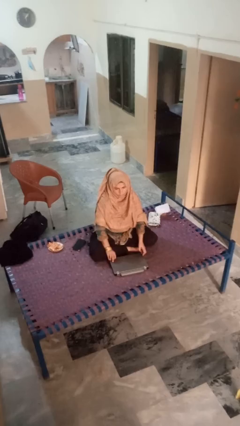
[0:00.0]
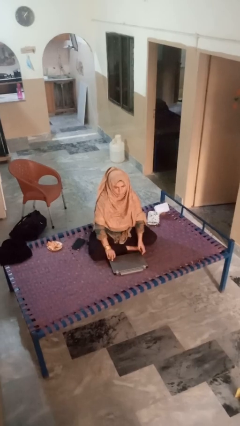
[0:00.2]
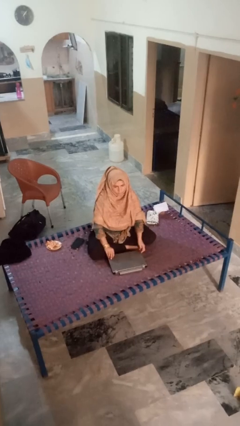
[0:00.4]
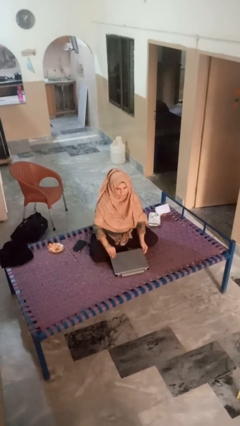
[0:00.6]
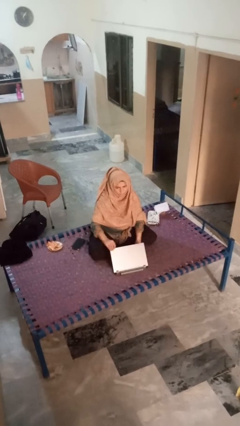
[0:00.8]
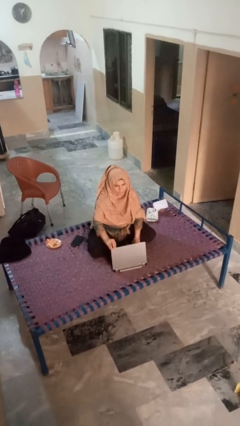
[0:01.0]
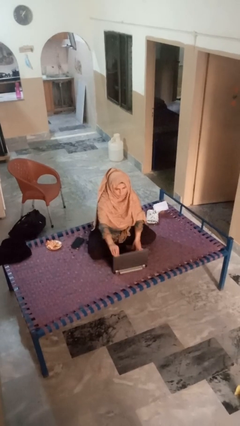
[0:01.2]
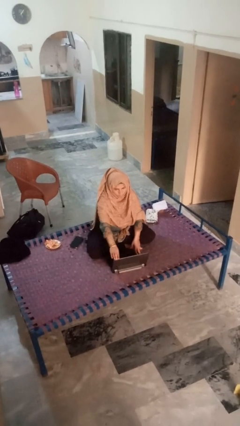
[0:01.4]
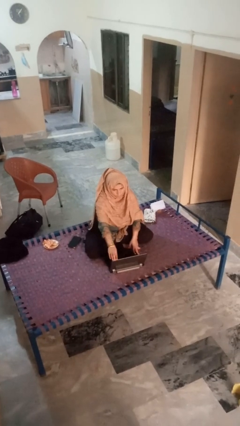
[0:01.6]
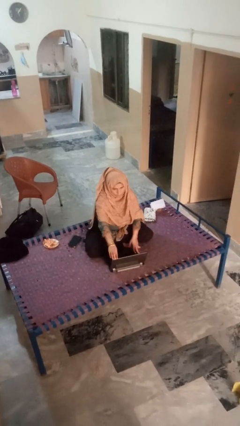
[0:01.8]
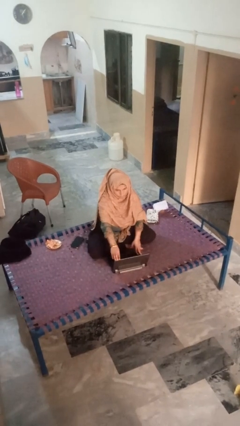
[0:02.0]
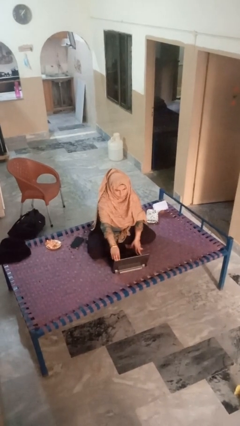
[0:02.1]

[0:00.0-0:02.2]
person opens laptop

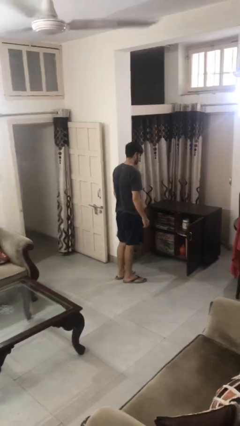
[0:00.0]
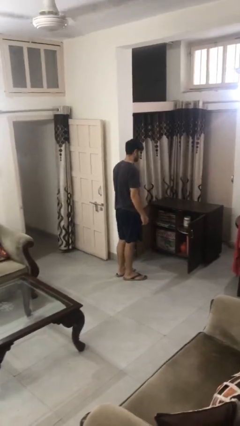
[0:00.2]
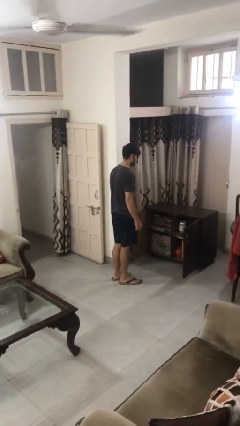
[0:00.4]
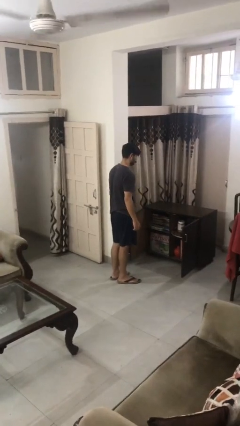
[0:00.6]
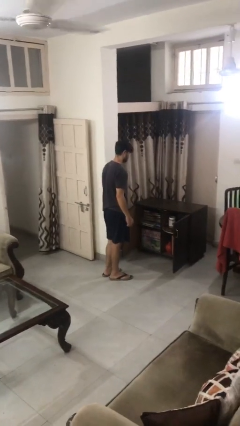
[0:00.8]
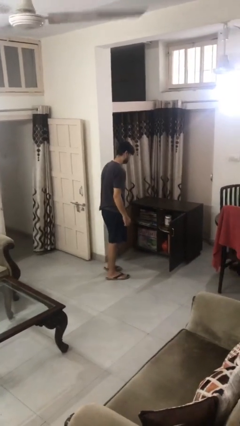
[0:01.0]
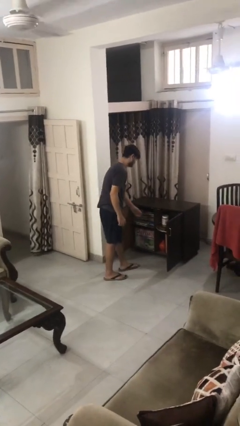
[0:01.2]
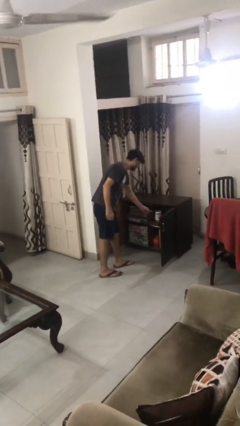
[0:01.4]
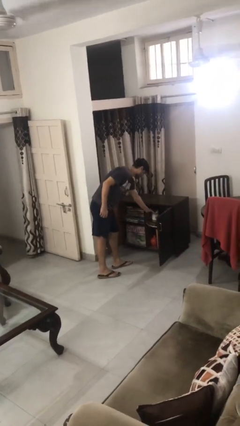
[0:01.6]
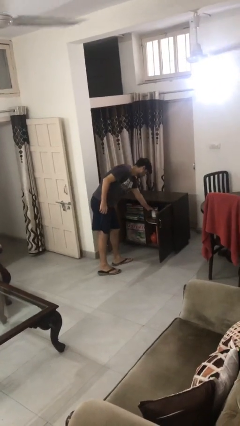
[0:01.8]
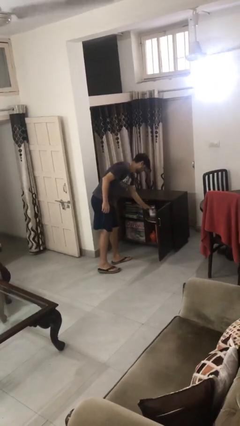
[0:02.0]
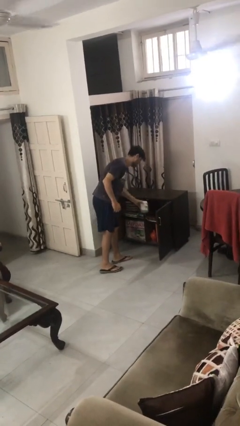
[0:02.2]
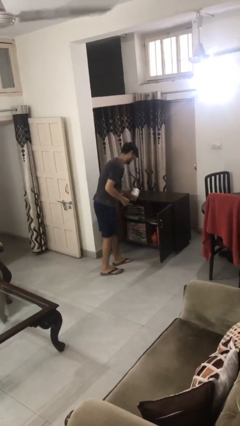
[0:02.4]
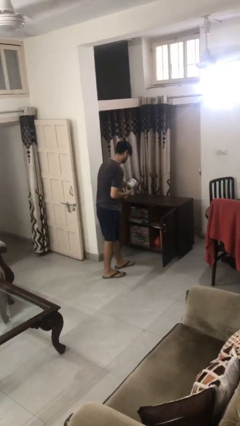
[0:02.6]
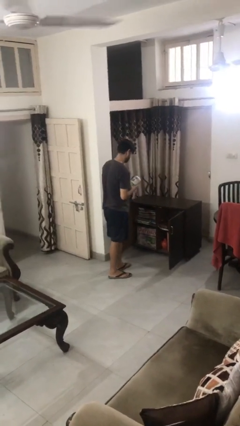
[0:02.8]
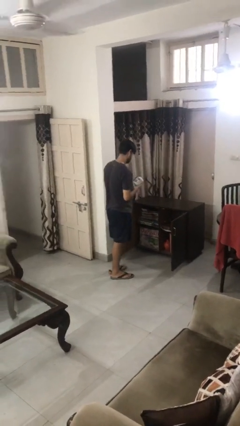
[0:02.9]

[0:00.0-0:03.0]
person picks up object from cabinet

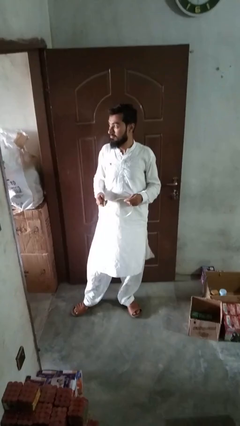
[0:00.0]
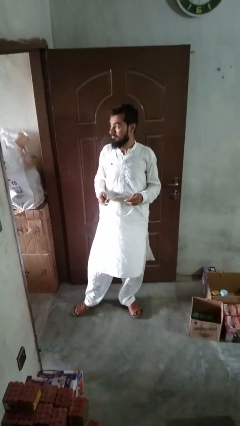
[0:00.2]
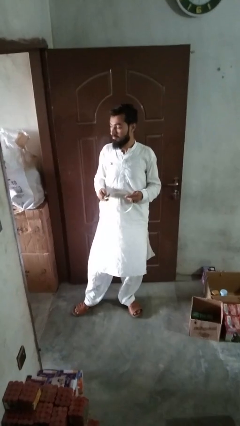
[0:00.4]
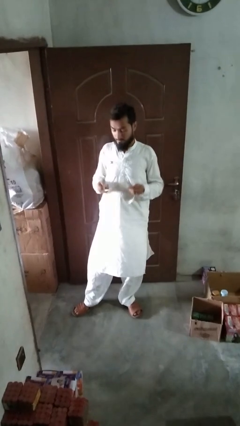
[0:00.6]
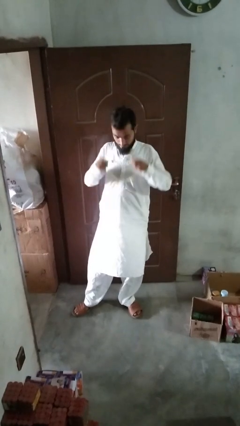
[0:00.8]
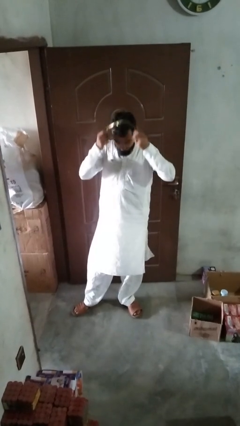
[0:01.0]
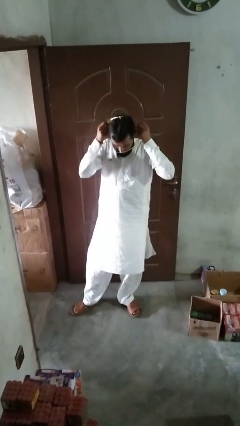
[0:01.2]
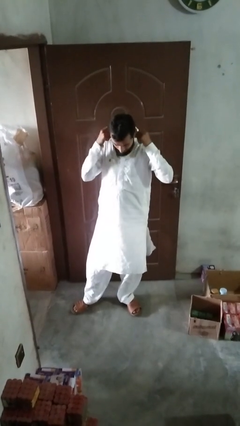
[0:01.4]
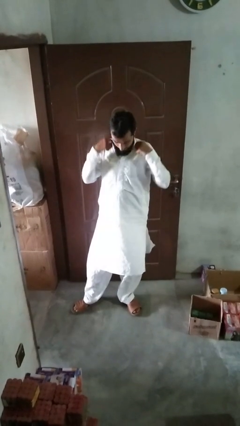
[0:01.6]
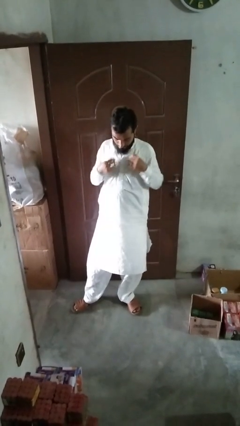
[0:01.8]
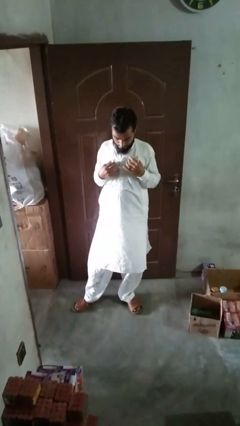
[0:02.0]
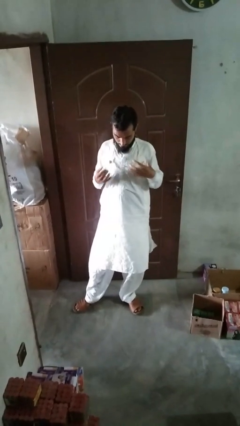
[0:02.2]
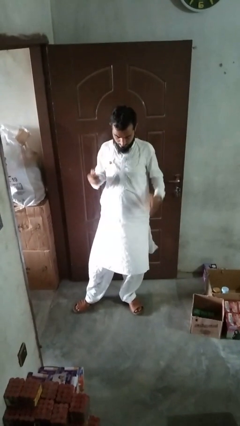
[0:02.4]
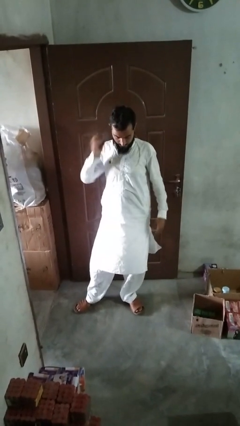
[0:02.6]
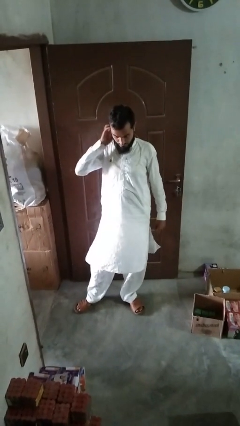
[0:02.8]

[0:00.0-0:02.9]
person puts on necklace

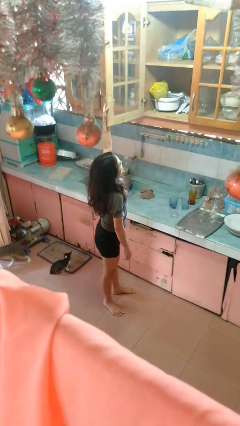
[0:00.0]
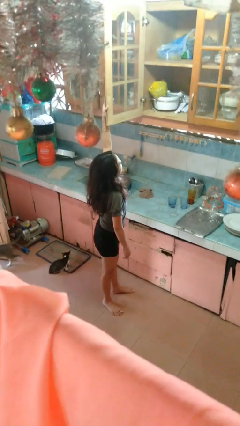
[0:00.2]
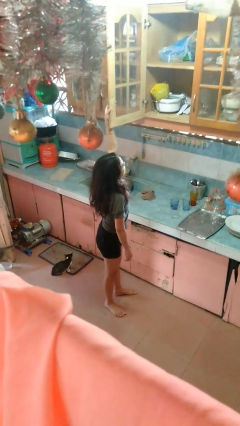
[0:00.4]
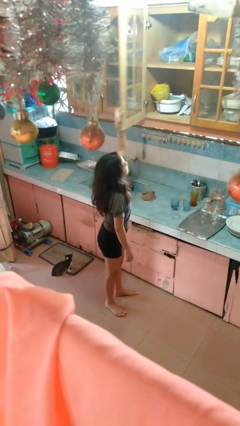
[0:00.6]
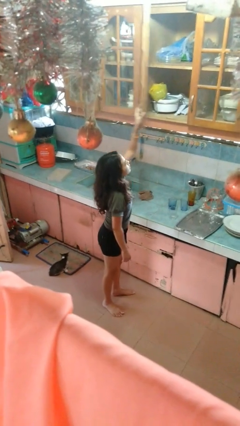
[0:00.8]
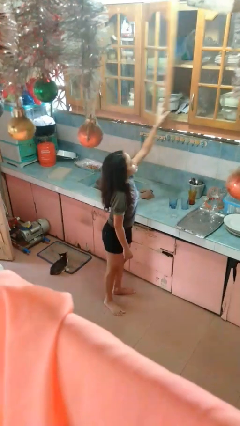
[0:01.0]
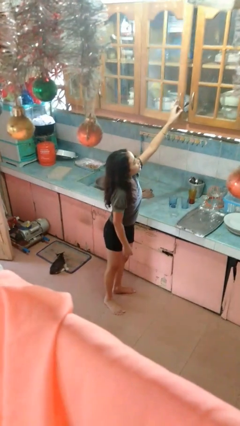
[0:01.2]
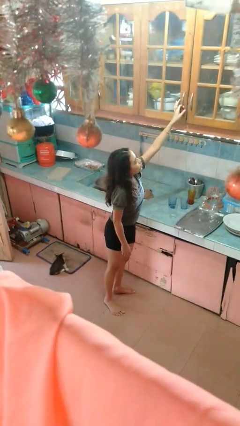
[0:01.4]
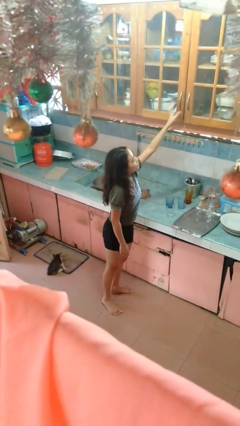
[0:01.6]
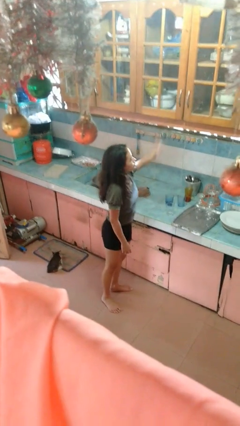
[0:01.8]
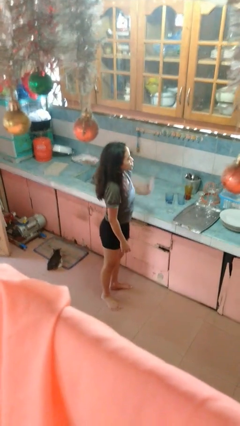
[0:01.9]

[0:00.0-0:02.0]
person closes cabinet

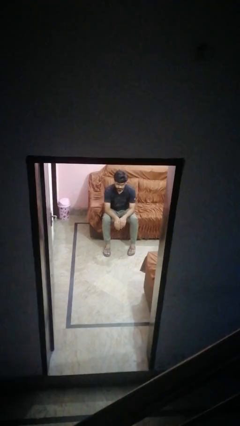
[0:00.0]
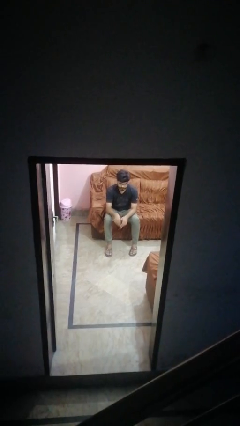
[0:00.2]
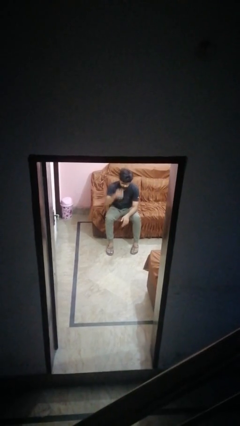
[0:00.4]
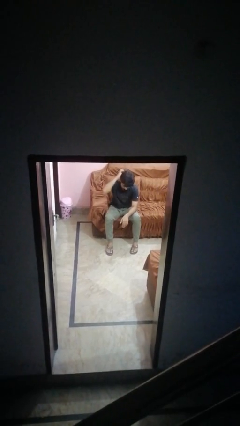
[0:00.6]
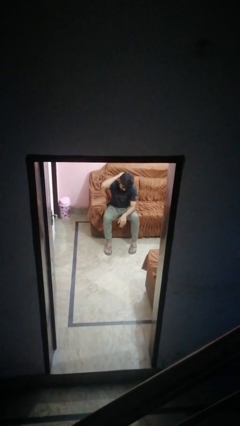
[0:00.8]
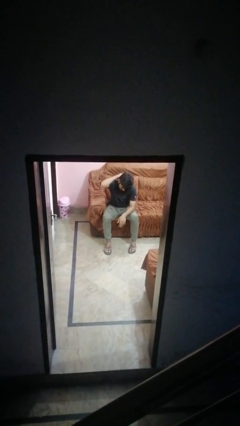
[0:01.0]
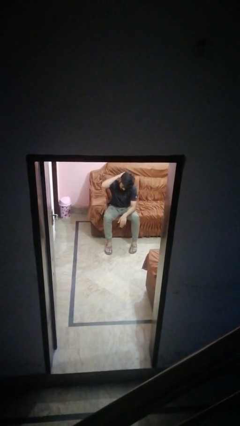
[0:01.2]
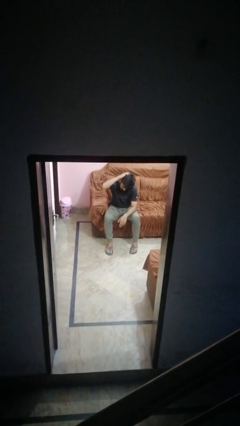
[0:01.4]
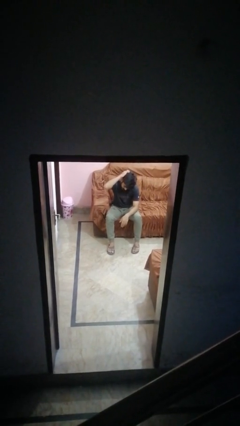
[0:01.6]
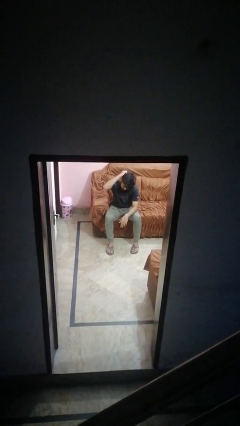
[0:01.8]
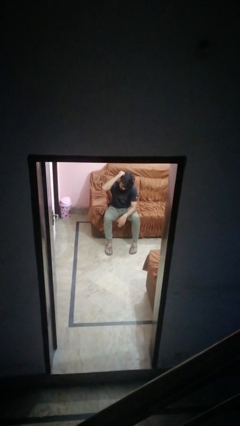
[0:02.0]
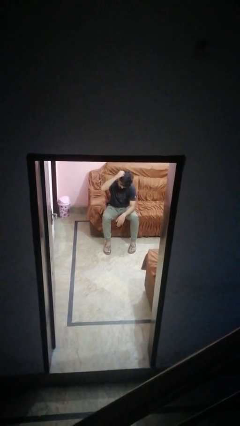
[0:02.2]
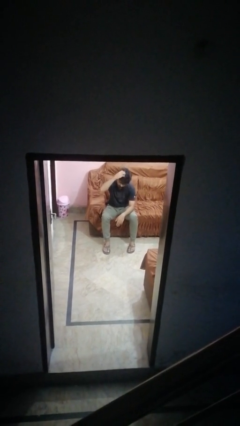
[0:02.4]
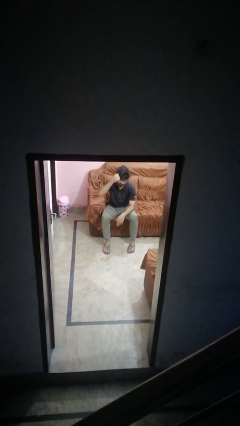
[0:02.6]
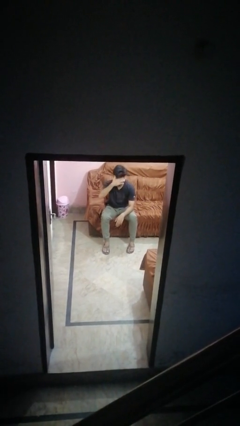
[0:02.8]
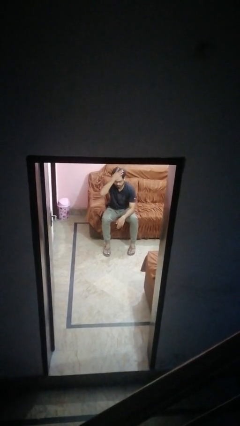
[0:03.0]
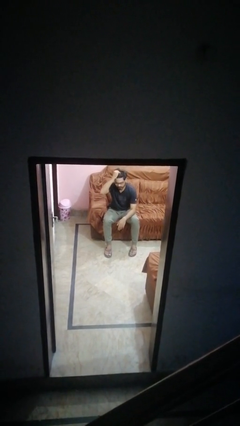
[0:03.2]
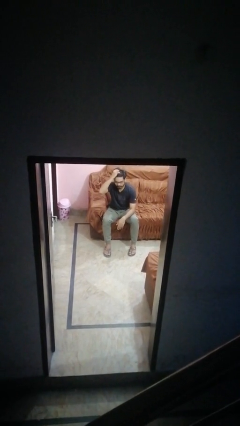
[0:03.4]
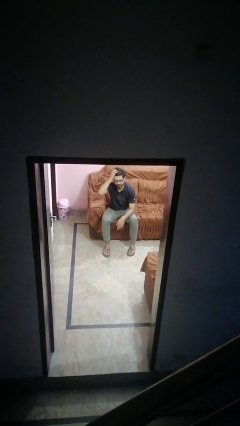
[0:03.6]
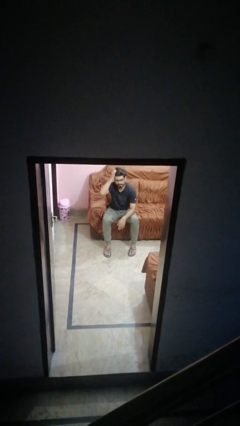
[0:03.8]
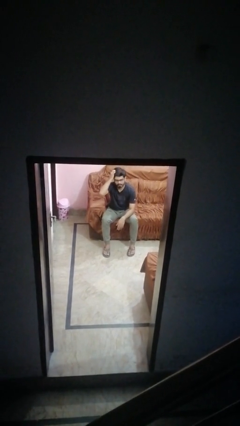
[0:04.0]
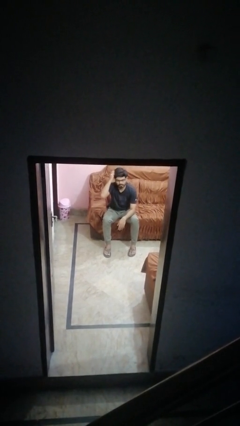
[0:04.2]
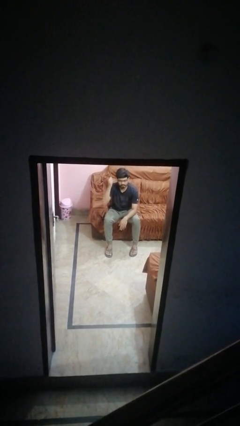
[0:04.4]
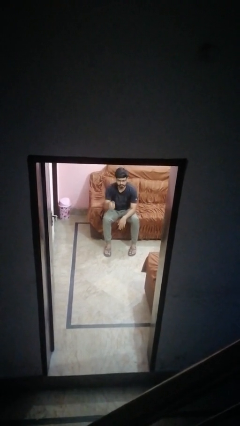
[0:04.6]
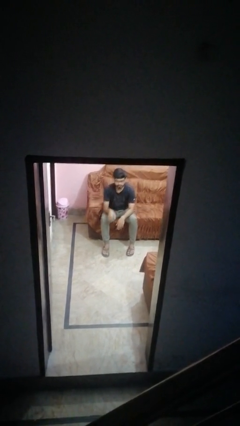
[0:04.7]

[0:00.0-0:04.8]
person scratches face

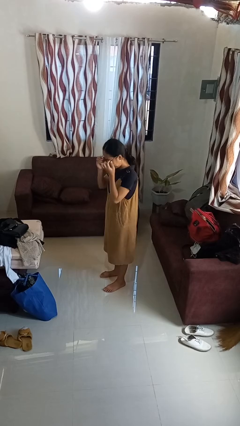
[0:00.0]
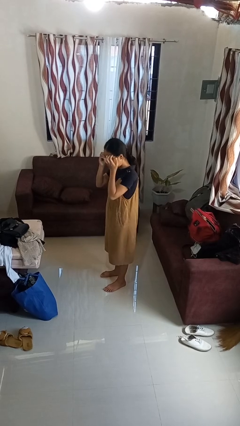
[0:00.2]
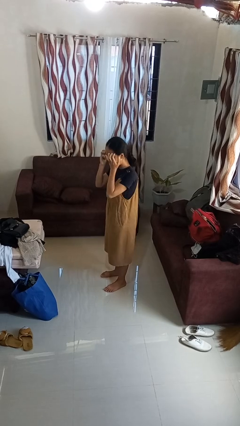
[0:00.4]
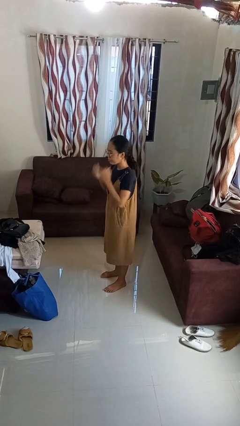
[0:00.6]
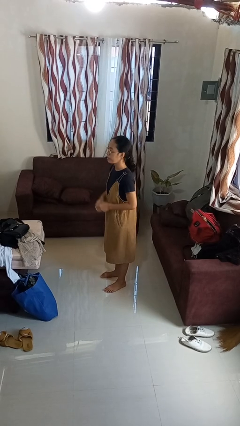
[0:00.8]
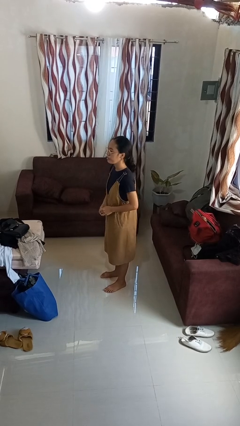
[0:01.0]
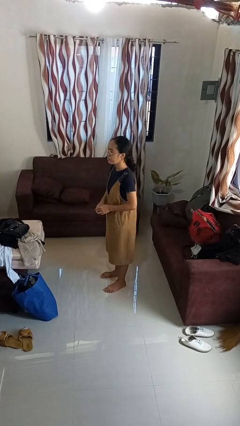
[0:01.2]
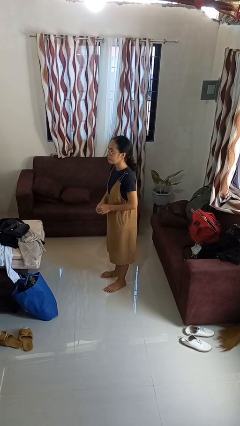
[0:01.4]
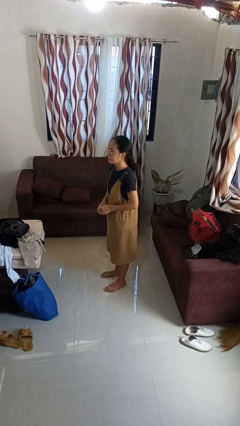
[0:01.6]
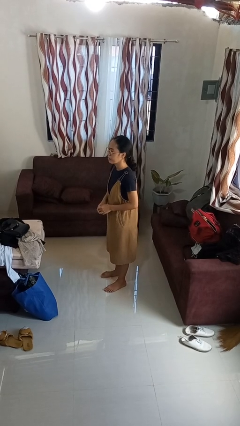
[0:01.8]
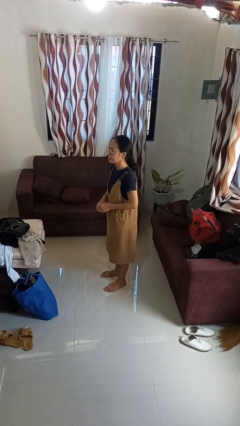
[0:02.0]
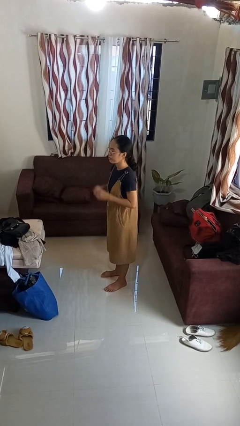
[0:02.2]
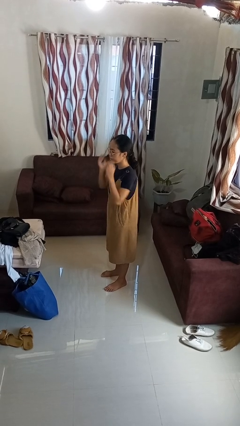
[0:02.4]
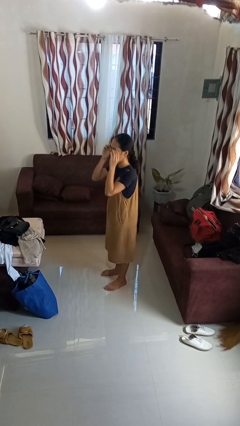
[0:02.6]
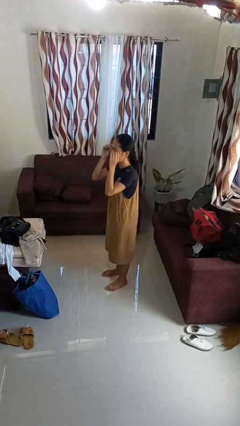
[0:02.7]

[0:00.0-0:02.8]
person puts on glasses

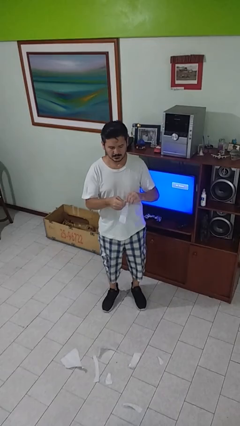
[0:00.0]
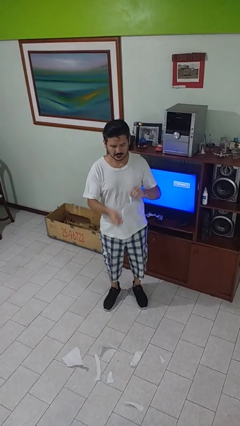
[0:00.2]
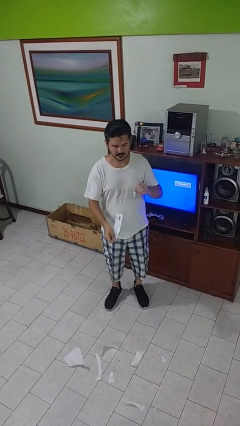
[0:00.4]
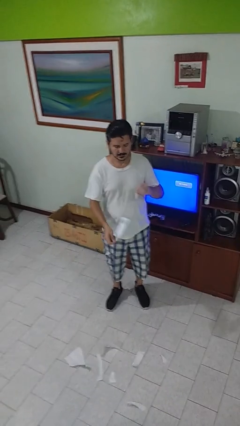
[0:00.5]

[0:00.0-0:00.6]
person tears paper
